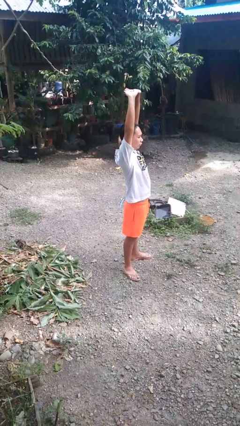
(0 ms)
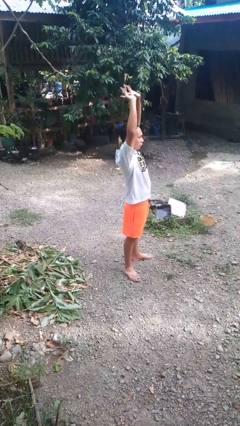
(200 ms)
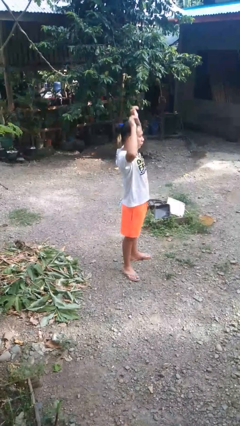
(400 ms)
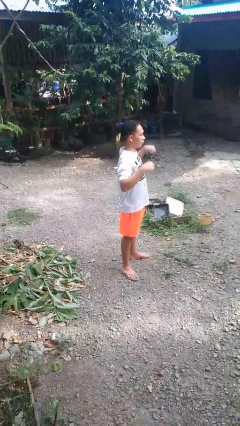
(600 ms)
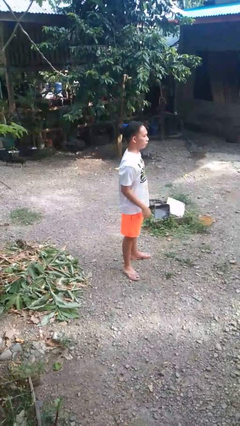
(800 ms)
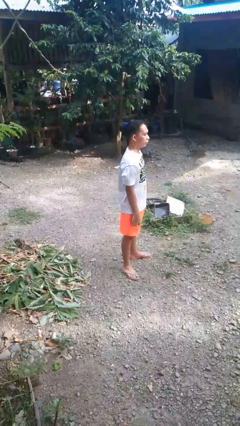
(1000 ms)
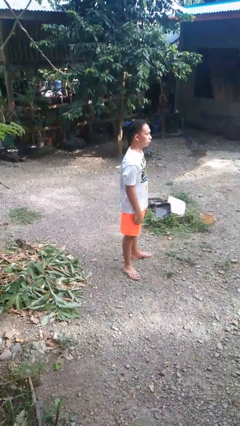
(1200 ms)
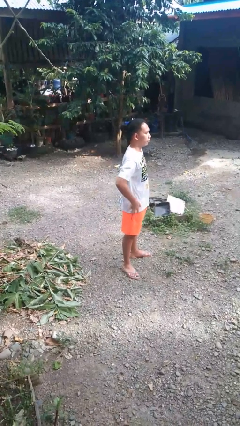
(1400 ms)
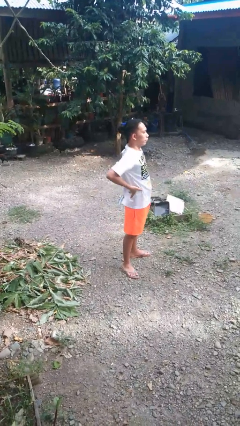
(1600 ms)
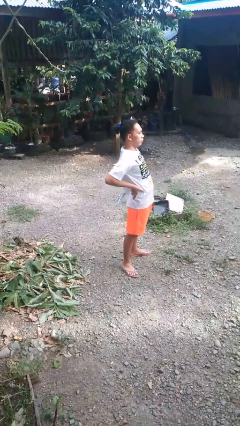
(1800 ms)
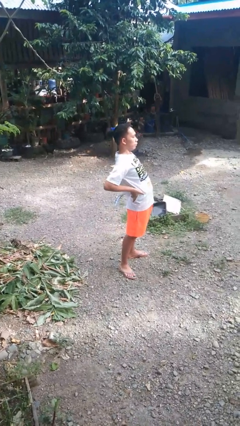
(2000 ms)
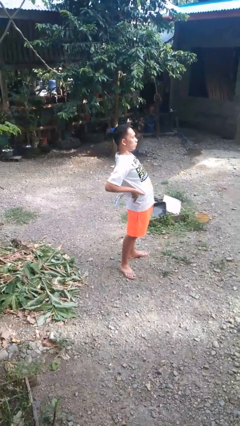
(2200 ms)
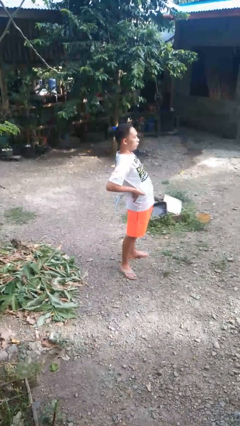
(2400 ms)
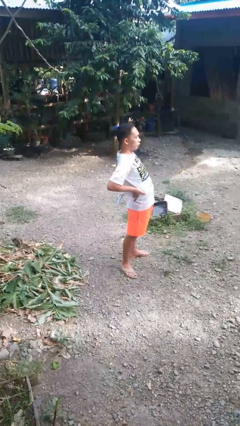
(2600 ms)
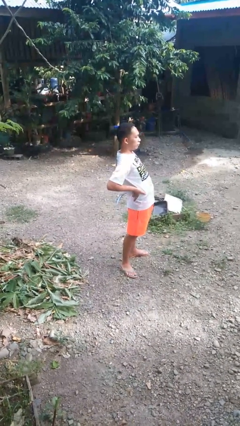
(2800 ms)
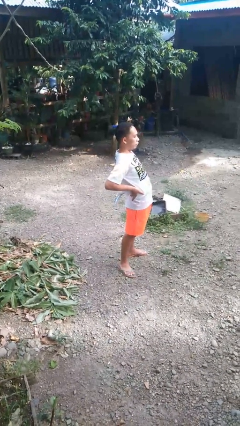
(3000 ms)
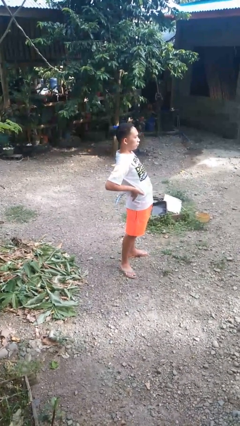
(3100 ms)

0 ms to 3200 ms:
person stretches back

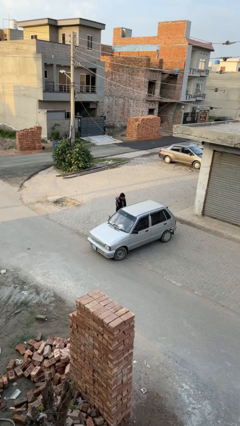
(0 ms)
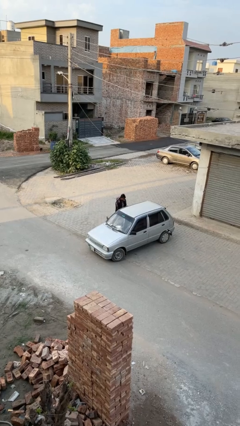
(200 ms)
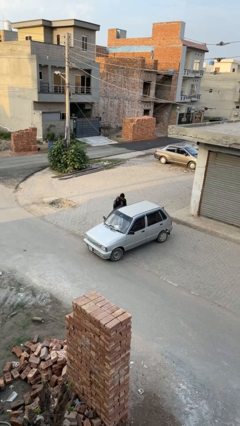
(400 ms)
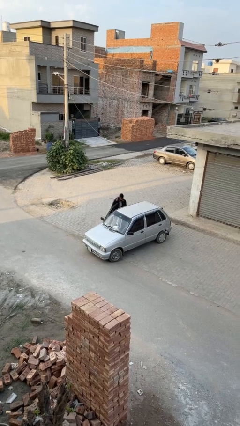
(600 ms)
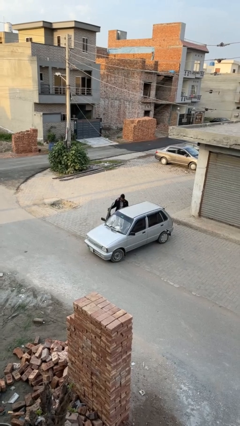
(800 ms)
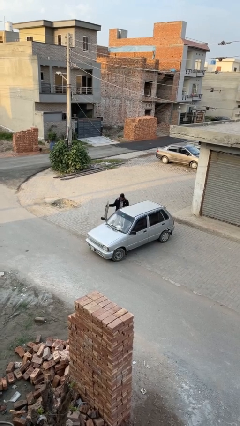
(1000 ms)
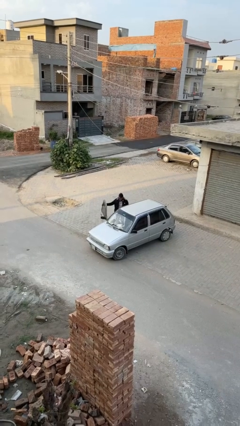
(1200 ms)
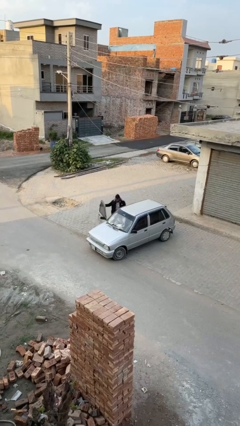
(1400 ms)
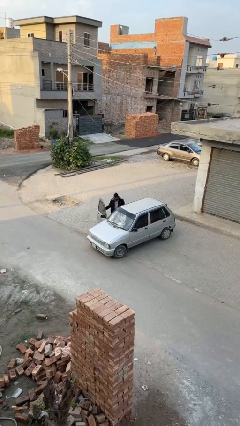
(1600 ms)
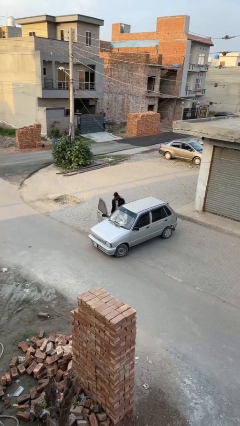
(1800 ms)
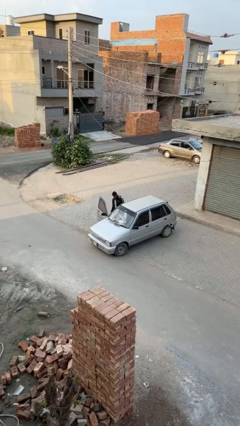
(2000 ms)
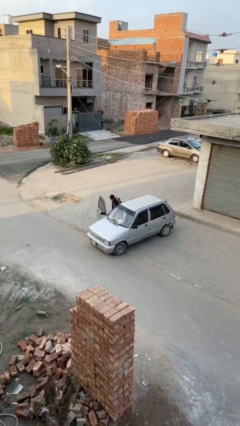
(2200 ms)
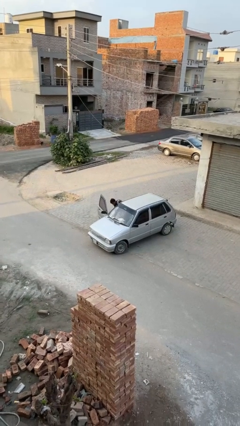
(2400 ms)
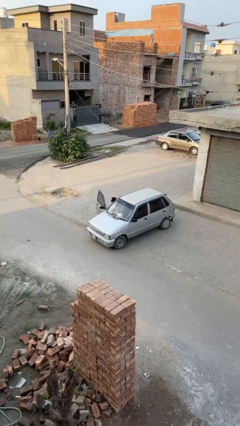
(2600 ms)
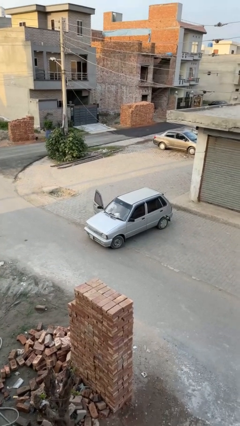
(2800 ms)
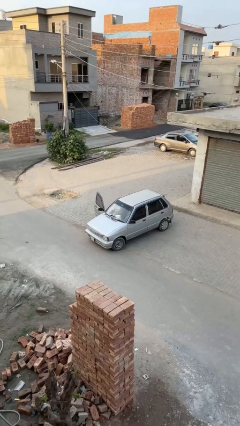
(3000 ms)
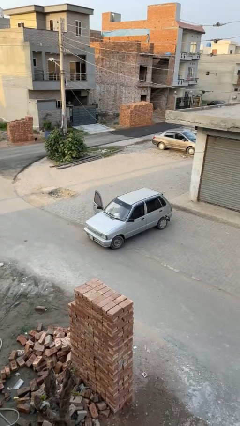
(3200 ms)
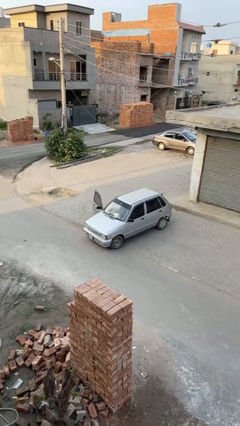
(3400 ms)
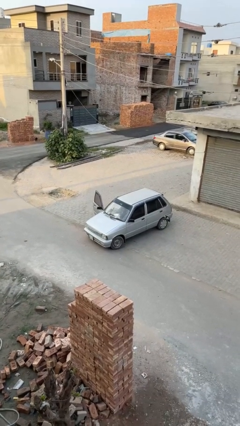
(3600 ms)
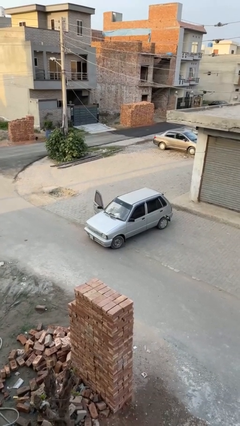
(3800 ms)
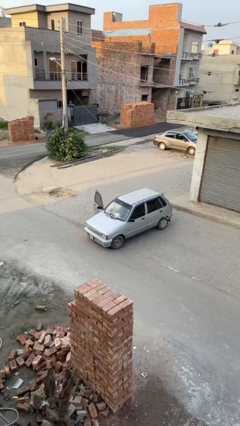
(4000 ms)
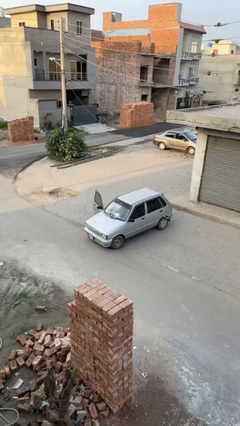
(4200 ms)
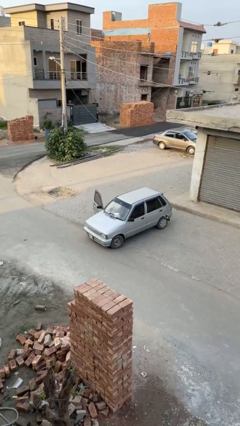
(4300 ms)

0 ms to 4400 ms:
person enters car

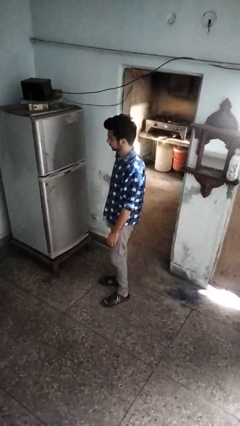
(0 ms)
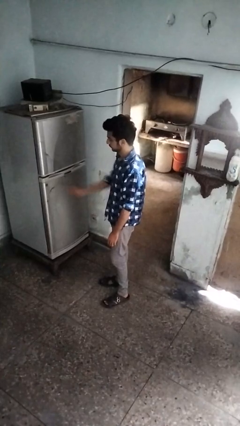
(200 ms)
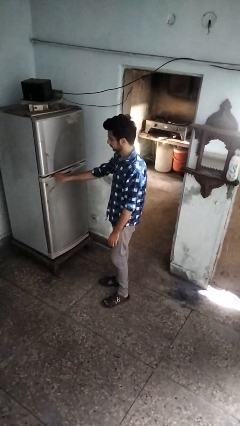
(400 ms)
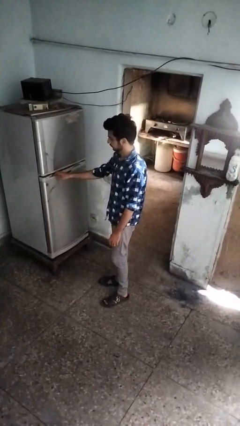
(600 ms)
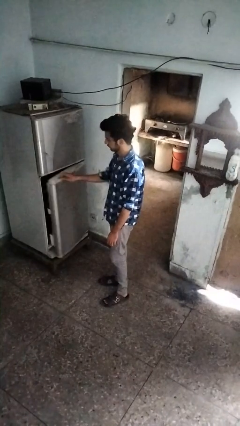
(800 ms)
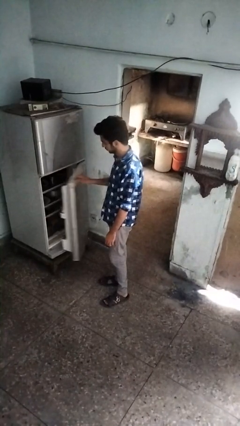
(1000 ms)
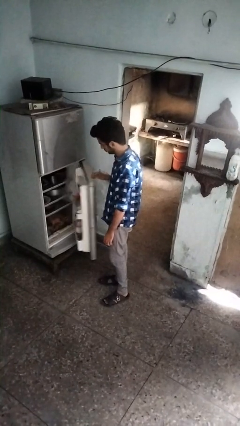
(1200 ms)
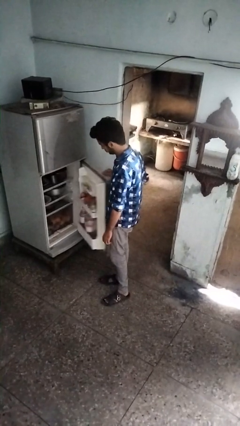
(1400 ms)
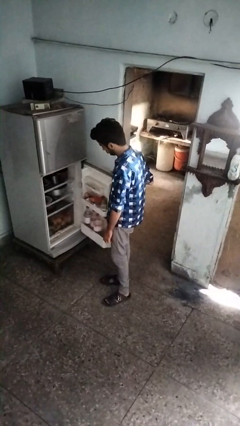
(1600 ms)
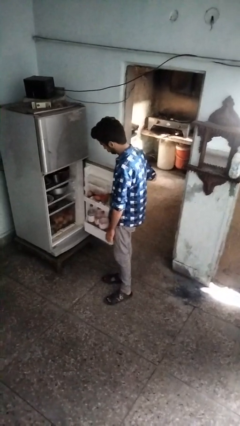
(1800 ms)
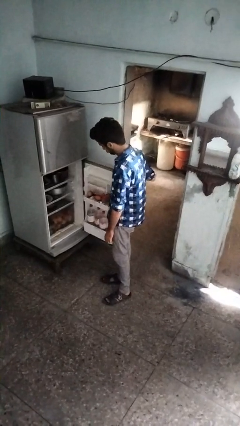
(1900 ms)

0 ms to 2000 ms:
person opens refrigerator

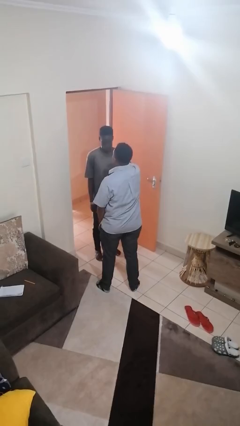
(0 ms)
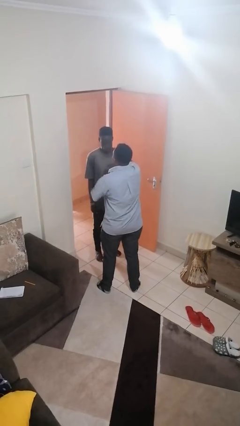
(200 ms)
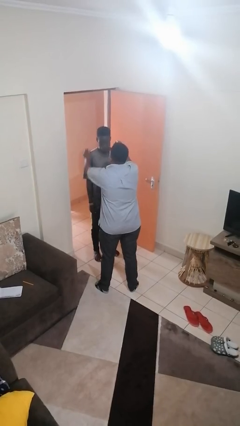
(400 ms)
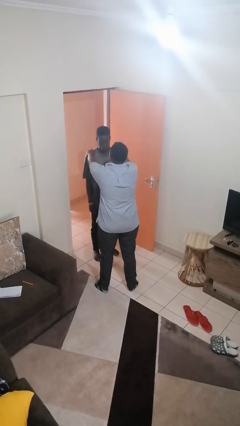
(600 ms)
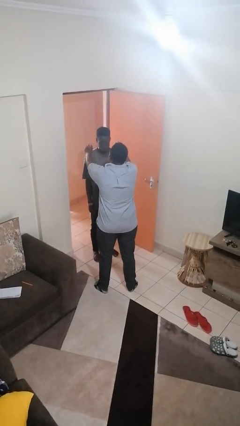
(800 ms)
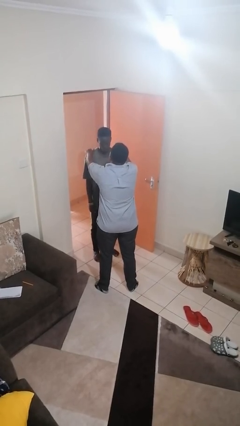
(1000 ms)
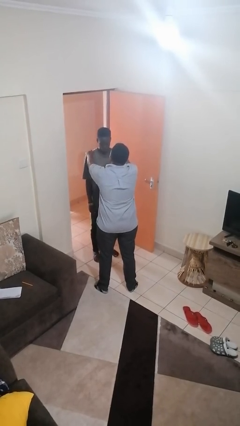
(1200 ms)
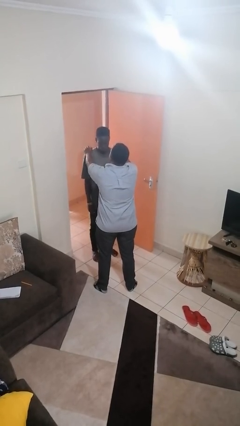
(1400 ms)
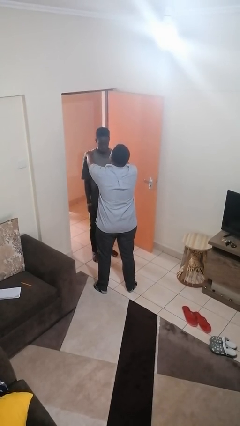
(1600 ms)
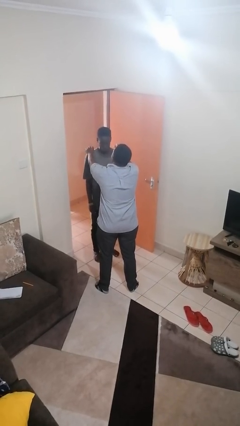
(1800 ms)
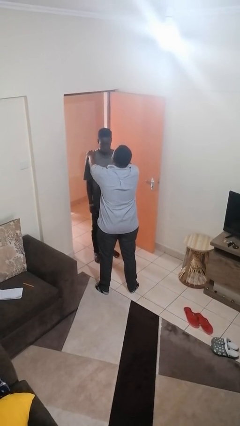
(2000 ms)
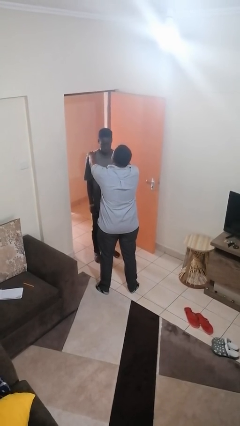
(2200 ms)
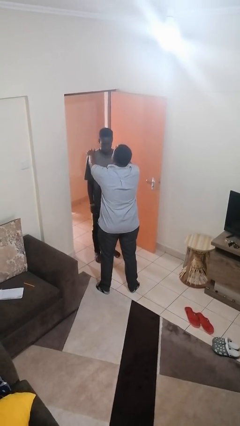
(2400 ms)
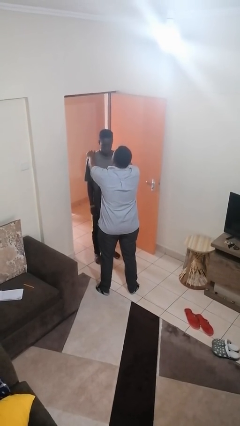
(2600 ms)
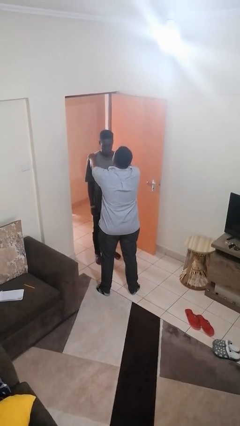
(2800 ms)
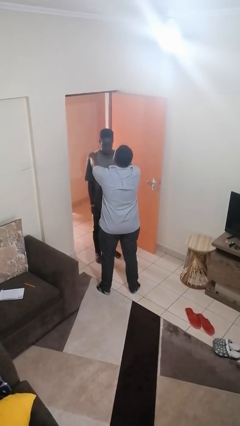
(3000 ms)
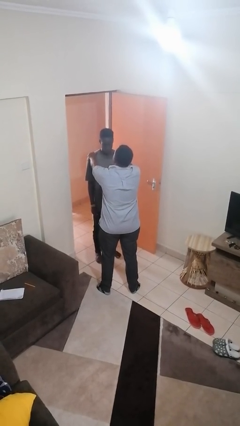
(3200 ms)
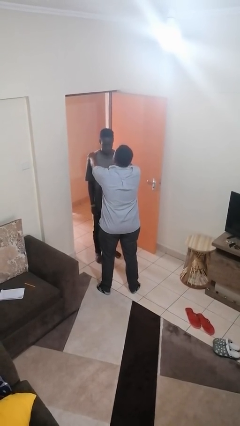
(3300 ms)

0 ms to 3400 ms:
person pounds shoulders of person

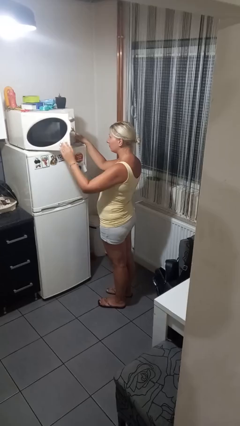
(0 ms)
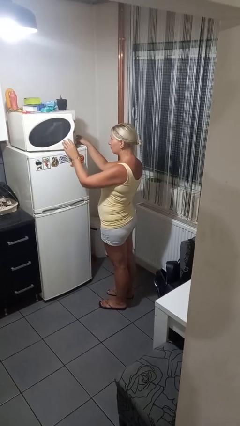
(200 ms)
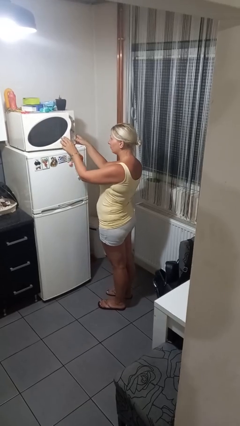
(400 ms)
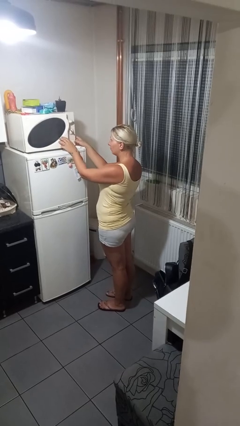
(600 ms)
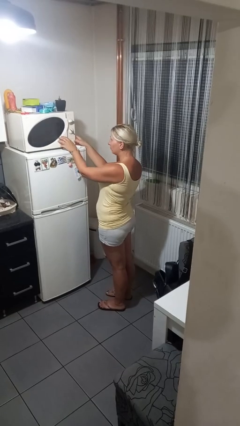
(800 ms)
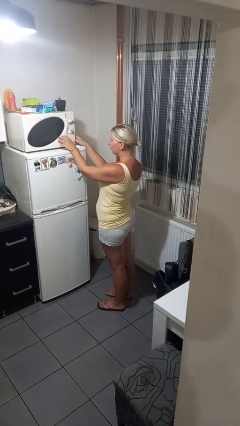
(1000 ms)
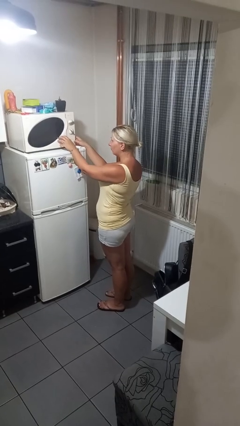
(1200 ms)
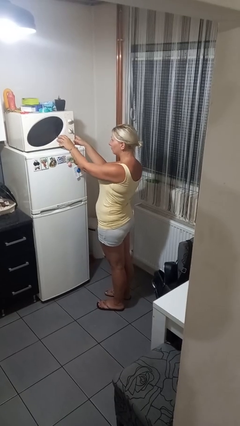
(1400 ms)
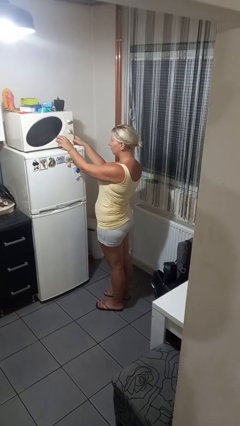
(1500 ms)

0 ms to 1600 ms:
person closes microwave

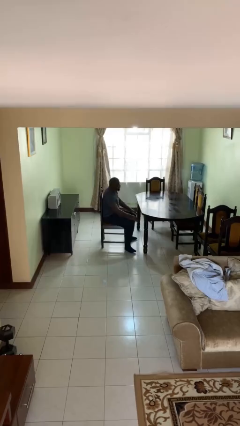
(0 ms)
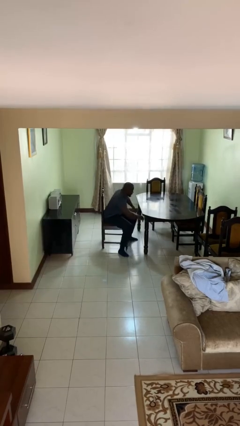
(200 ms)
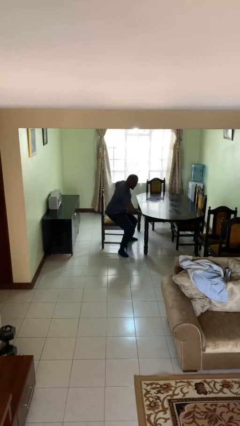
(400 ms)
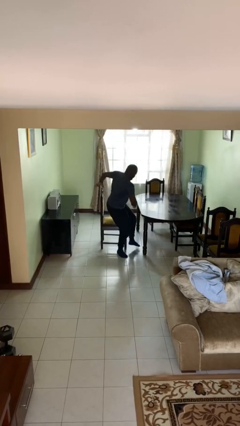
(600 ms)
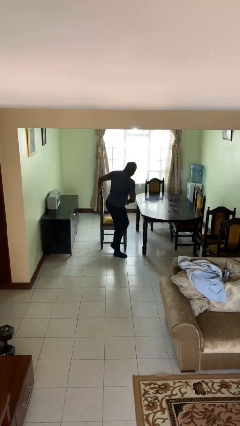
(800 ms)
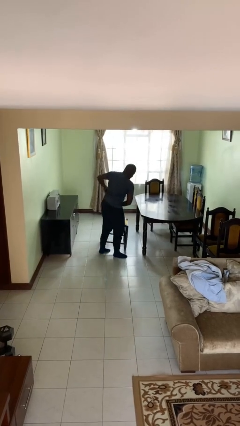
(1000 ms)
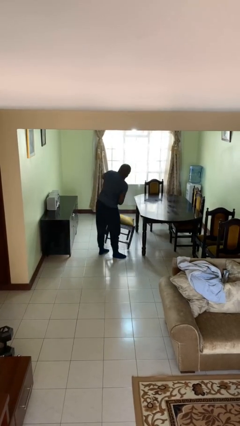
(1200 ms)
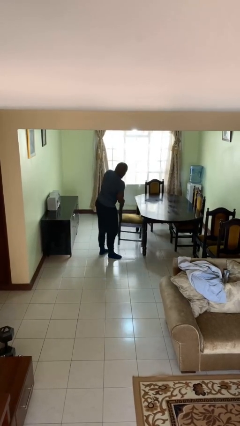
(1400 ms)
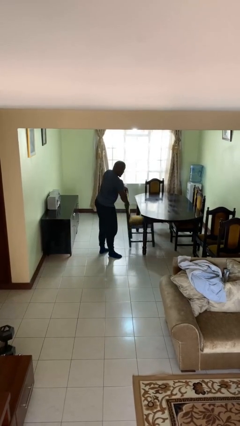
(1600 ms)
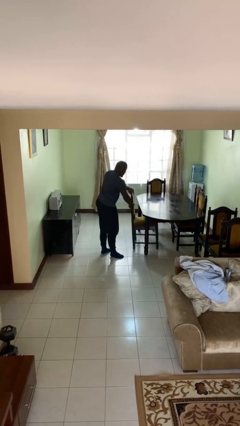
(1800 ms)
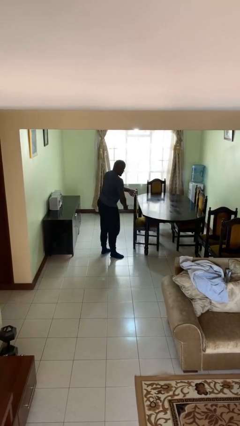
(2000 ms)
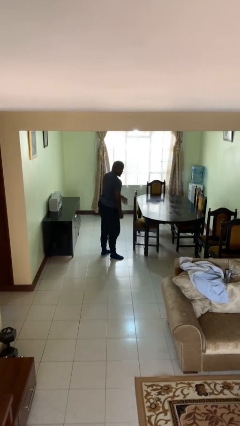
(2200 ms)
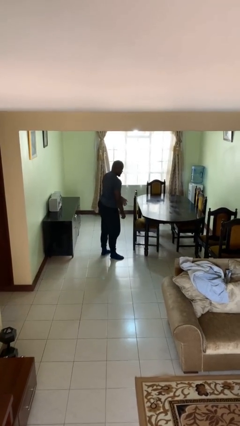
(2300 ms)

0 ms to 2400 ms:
person stands up

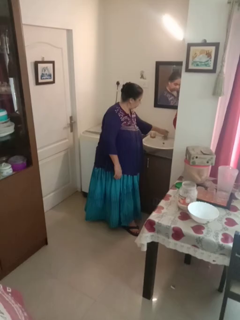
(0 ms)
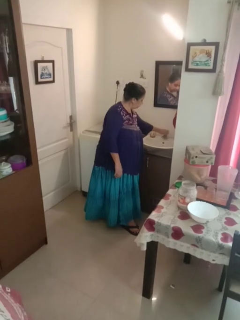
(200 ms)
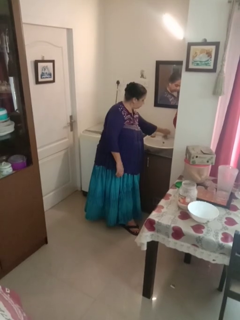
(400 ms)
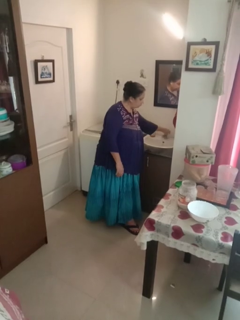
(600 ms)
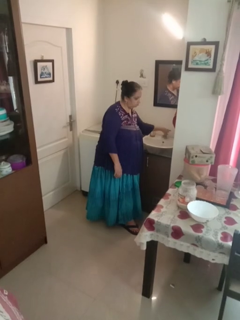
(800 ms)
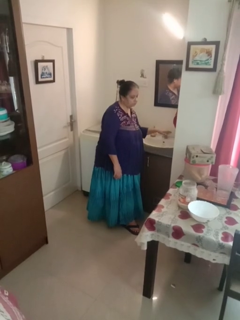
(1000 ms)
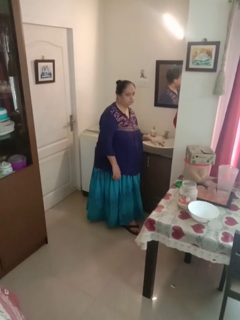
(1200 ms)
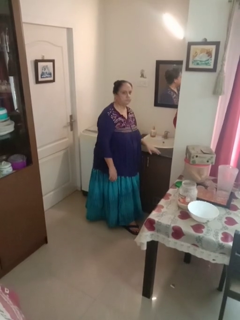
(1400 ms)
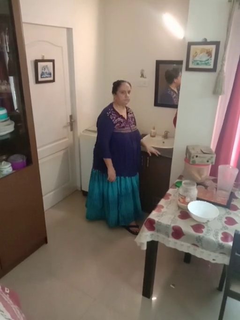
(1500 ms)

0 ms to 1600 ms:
person turns on faucet
